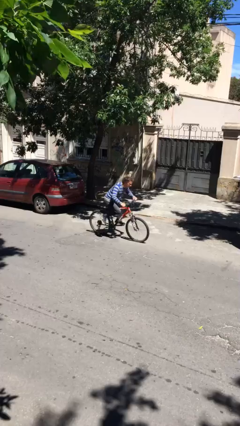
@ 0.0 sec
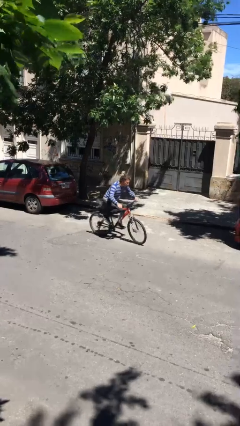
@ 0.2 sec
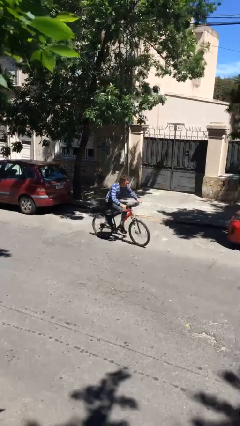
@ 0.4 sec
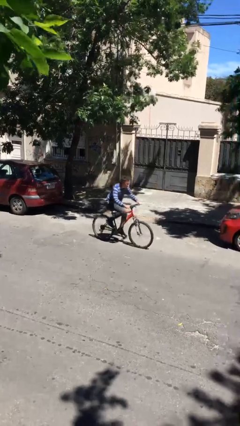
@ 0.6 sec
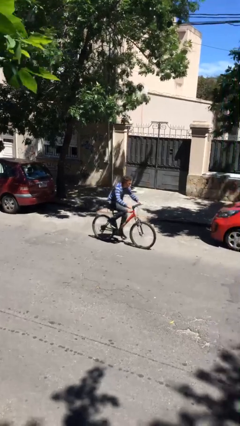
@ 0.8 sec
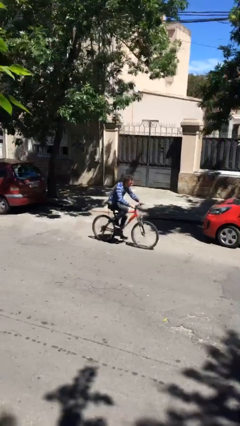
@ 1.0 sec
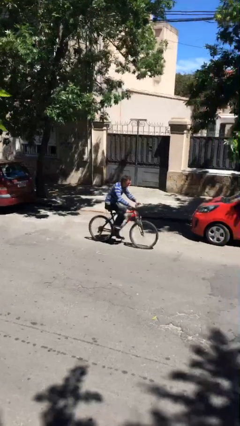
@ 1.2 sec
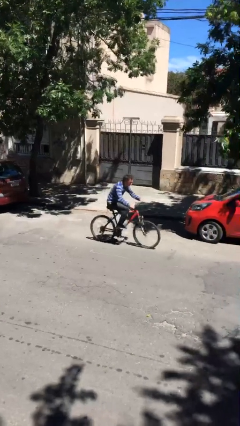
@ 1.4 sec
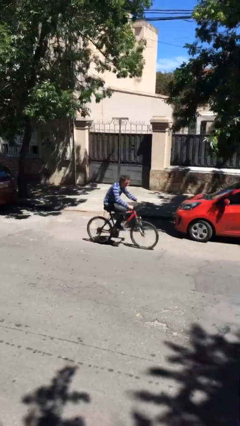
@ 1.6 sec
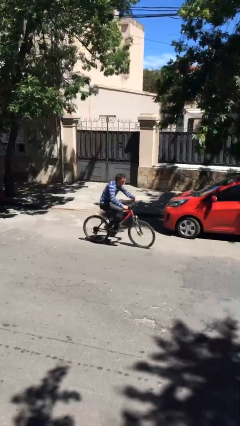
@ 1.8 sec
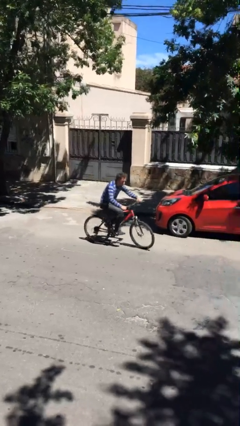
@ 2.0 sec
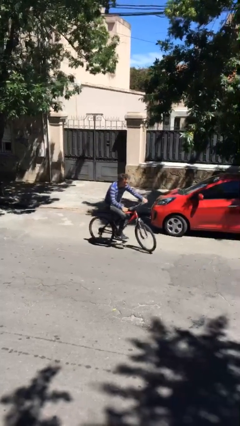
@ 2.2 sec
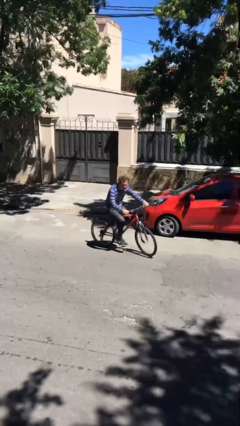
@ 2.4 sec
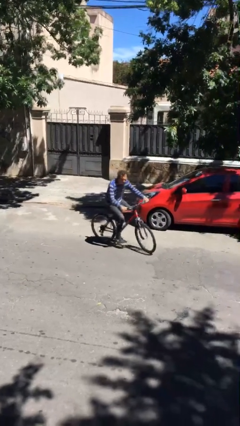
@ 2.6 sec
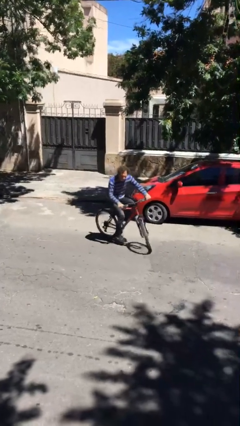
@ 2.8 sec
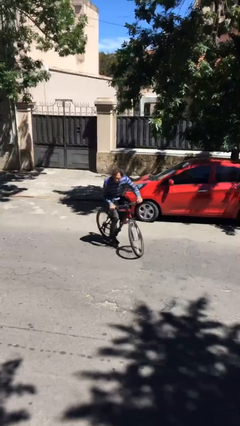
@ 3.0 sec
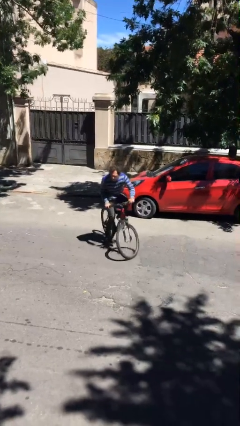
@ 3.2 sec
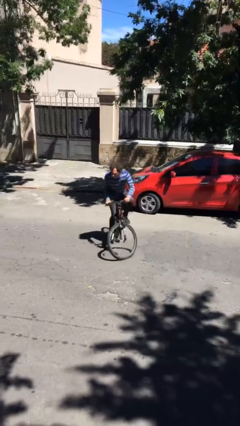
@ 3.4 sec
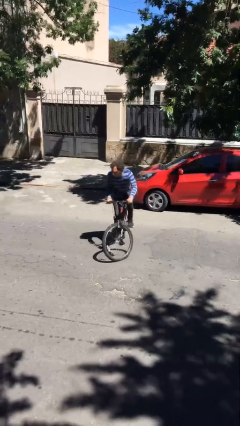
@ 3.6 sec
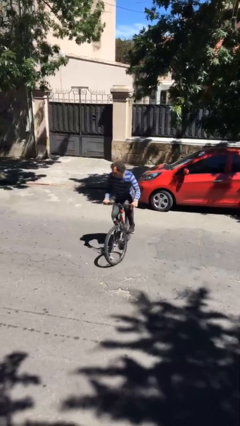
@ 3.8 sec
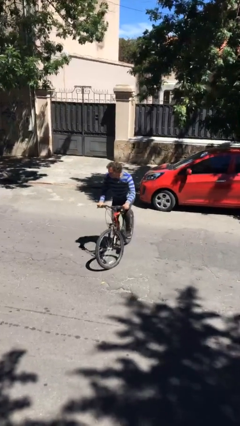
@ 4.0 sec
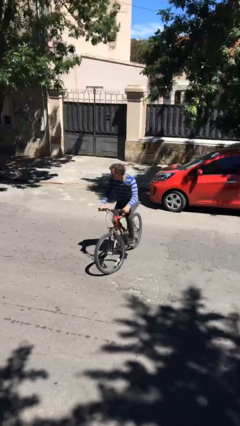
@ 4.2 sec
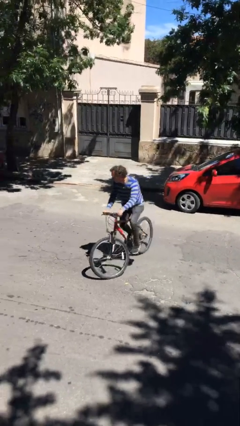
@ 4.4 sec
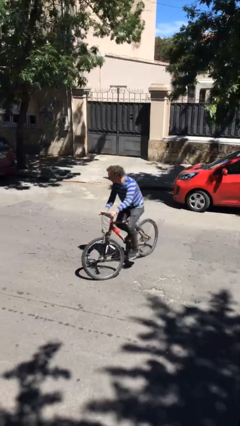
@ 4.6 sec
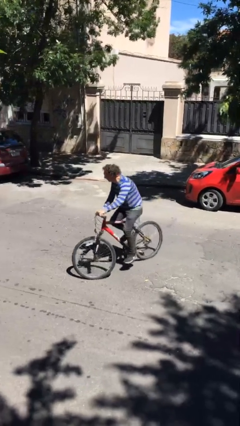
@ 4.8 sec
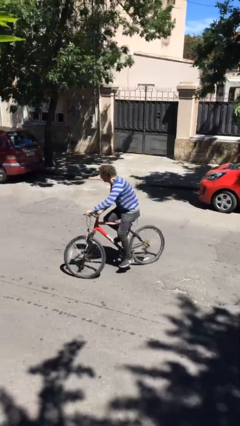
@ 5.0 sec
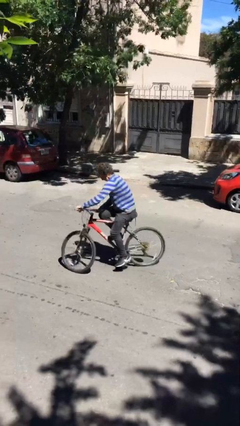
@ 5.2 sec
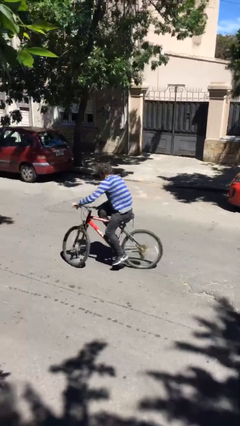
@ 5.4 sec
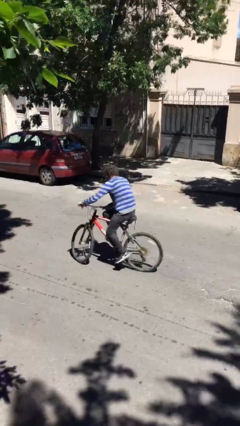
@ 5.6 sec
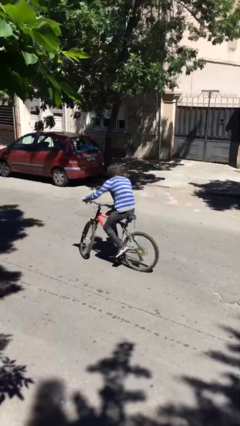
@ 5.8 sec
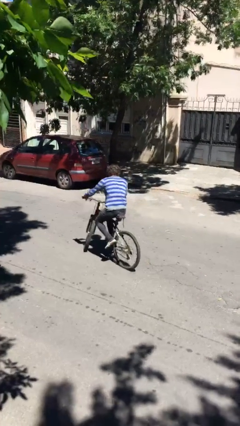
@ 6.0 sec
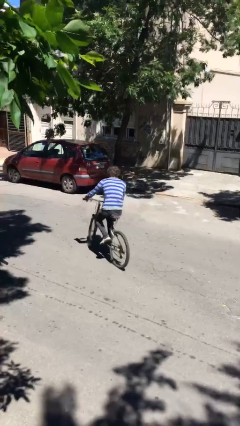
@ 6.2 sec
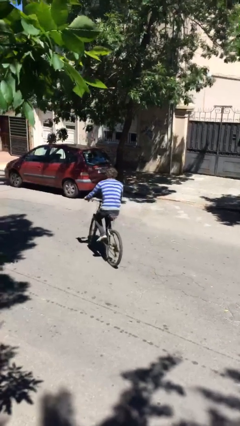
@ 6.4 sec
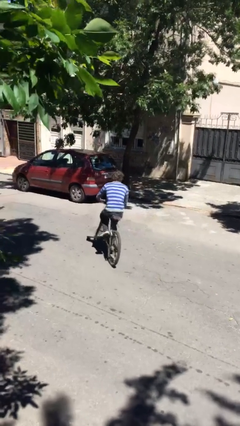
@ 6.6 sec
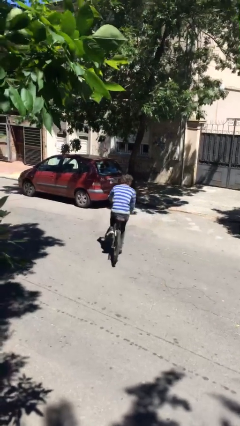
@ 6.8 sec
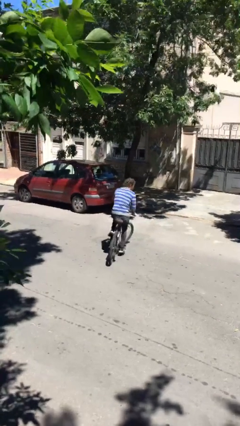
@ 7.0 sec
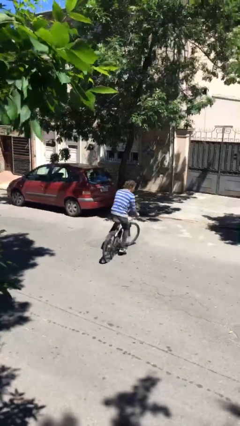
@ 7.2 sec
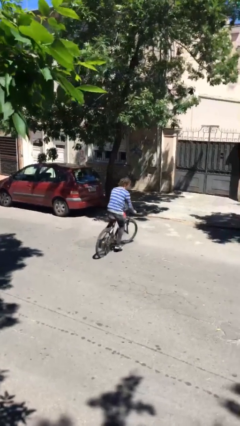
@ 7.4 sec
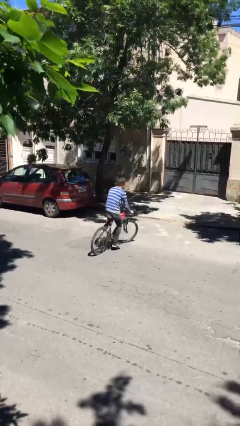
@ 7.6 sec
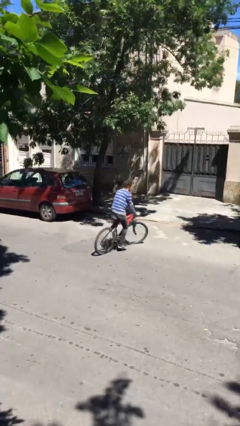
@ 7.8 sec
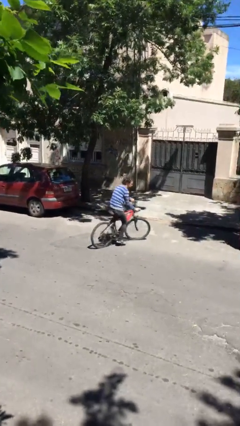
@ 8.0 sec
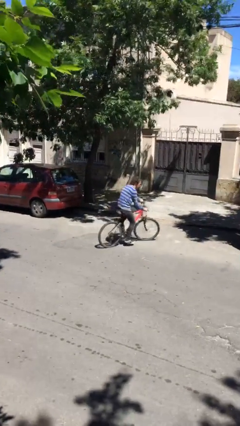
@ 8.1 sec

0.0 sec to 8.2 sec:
person rides bicycle

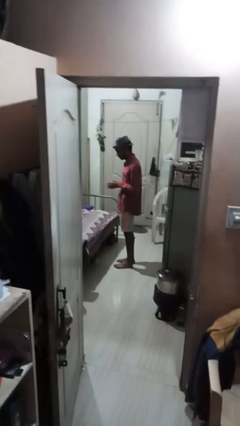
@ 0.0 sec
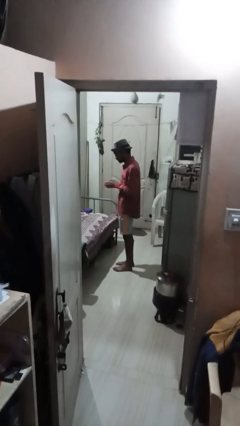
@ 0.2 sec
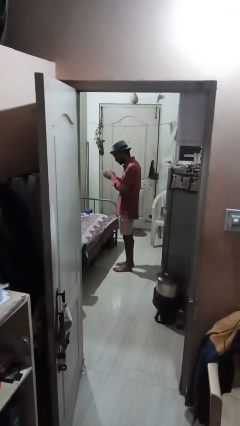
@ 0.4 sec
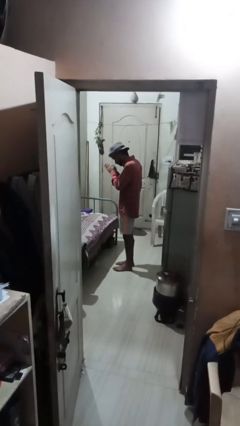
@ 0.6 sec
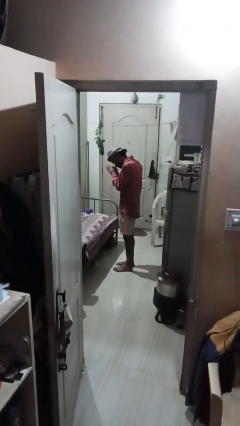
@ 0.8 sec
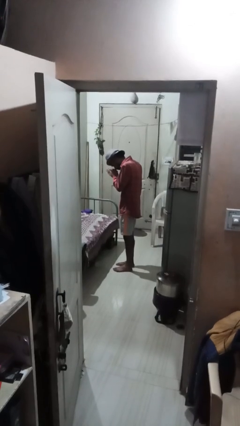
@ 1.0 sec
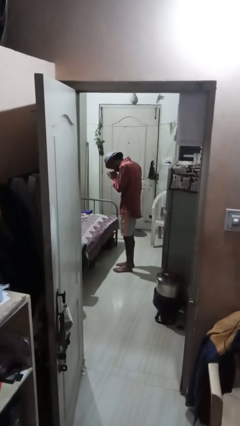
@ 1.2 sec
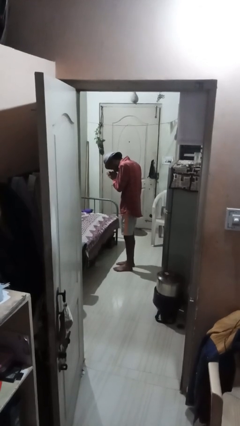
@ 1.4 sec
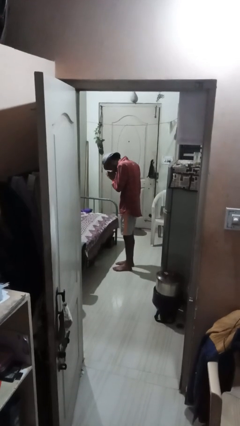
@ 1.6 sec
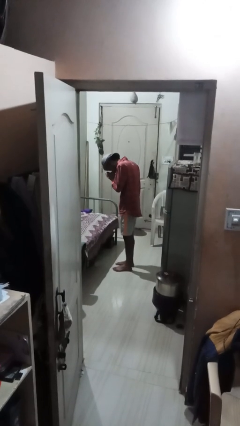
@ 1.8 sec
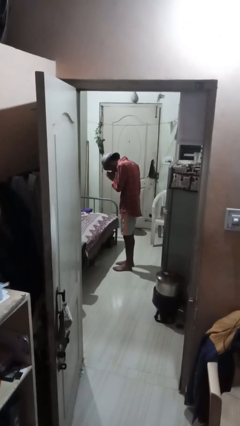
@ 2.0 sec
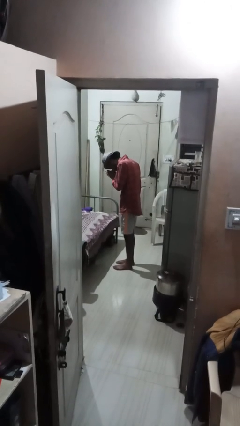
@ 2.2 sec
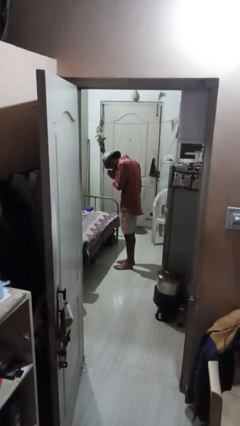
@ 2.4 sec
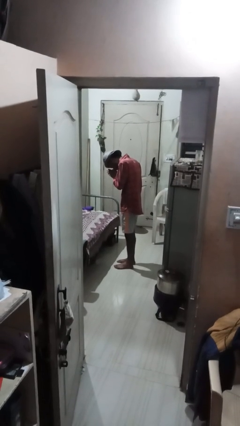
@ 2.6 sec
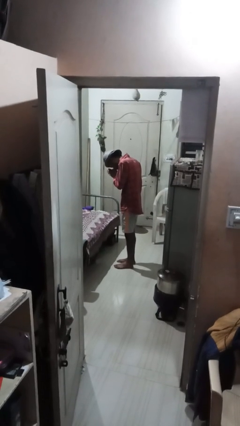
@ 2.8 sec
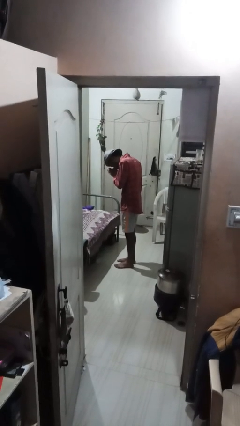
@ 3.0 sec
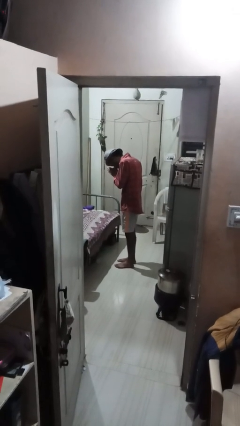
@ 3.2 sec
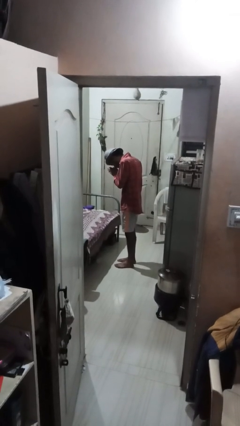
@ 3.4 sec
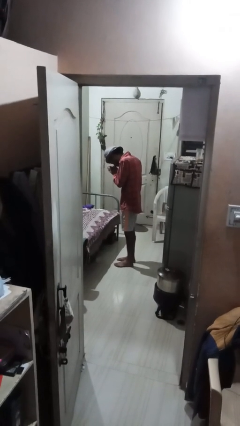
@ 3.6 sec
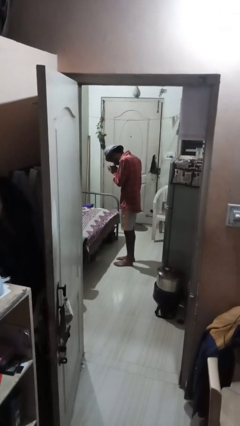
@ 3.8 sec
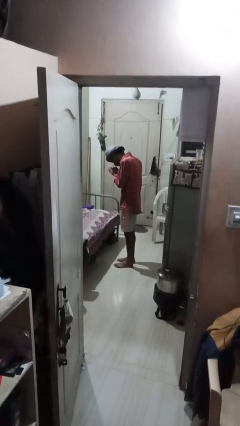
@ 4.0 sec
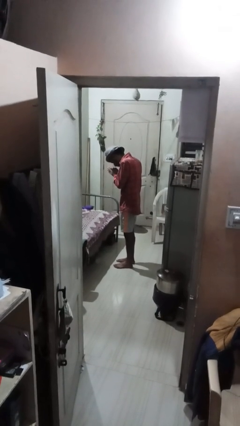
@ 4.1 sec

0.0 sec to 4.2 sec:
person prays

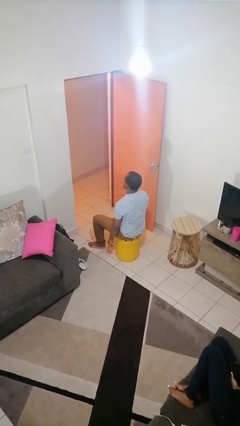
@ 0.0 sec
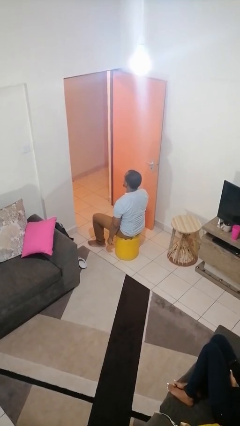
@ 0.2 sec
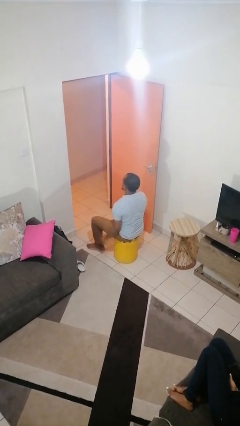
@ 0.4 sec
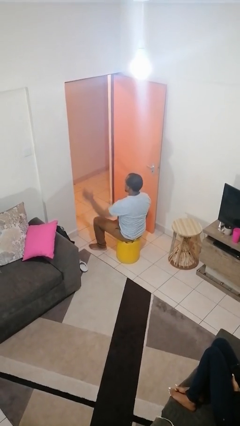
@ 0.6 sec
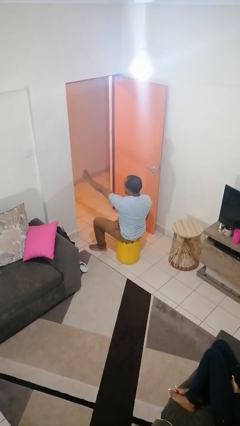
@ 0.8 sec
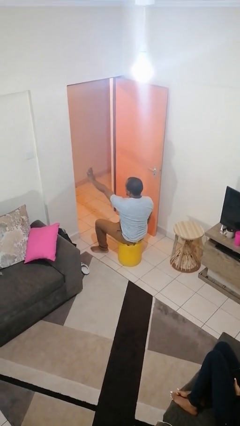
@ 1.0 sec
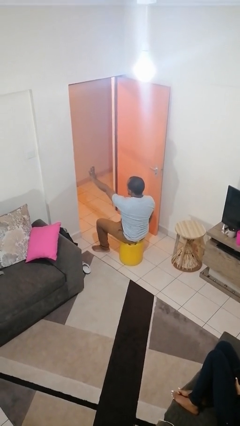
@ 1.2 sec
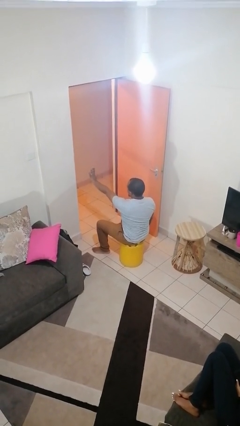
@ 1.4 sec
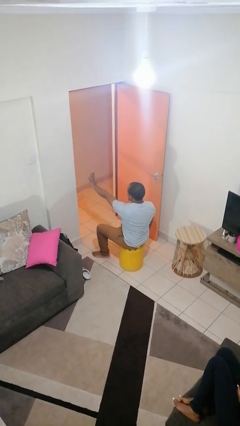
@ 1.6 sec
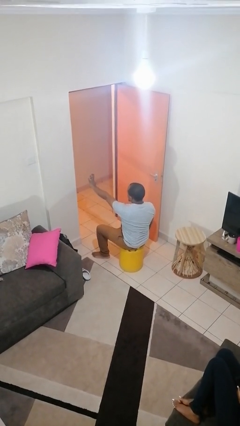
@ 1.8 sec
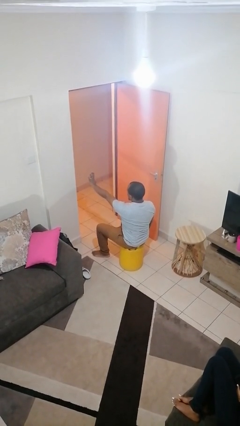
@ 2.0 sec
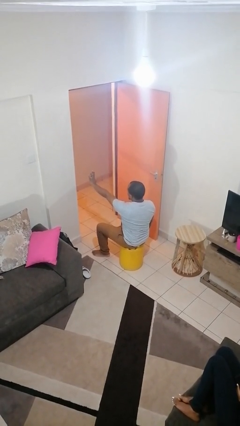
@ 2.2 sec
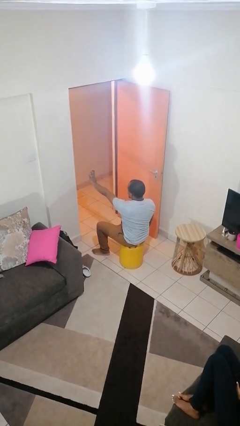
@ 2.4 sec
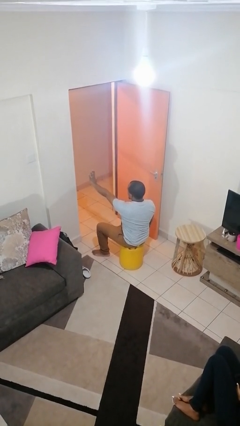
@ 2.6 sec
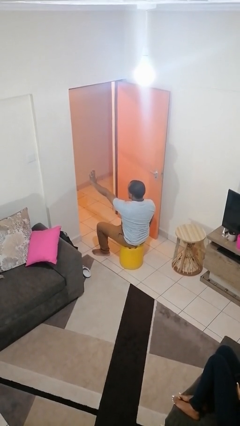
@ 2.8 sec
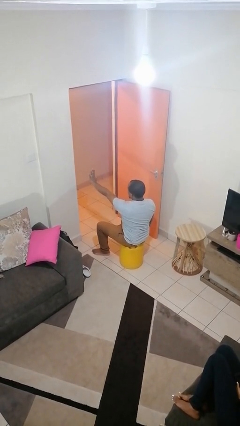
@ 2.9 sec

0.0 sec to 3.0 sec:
person gestures stop

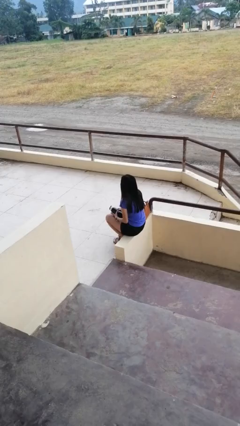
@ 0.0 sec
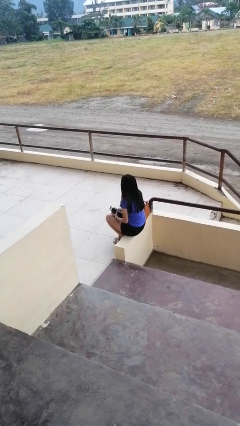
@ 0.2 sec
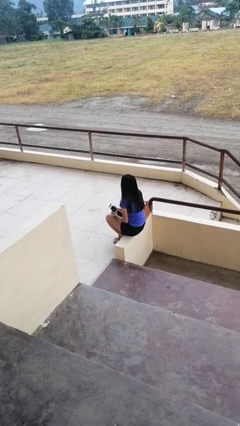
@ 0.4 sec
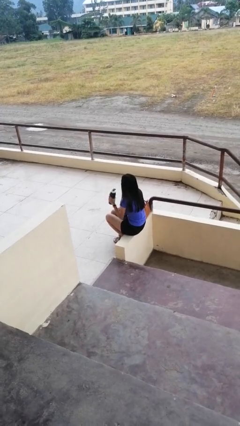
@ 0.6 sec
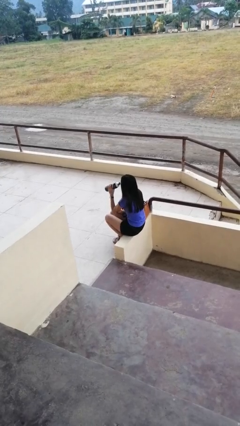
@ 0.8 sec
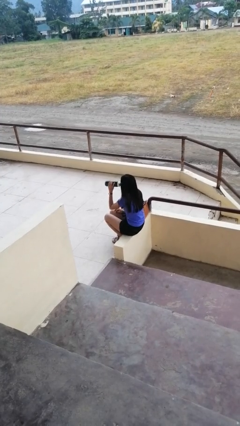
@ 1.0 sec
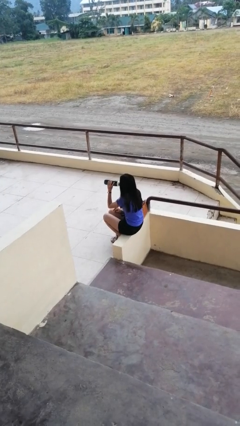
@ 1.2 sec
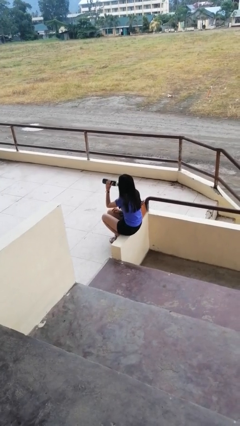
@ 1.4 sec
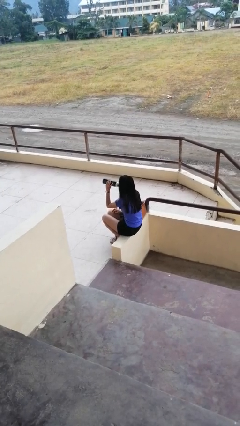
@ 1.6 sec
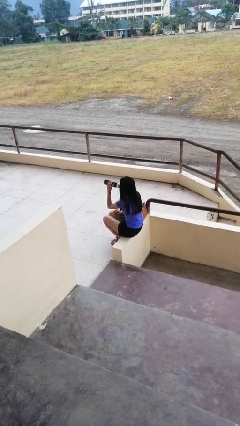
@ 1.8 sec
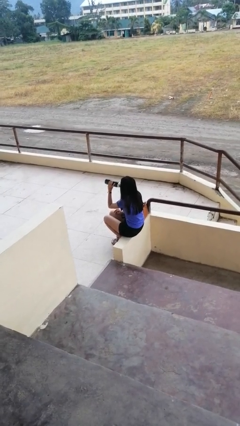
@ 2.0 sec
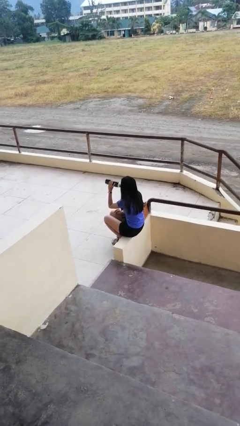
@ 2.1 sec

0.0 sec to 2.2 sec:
person drinks from bottle
